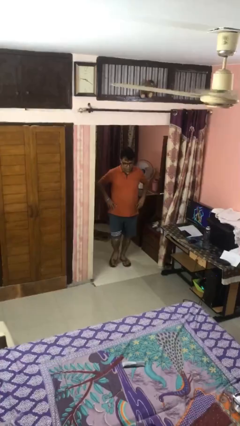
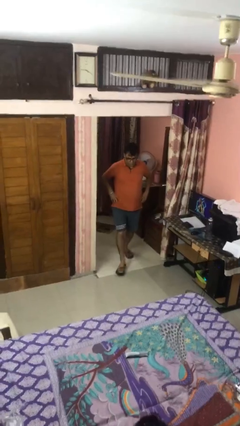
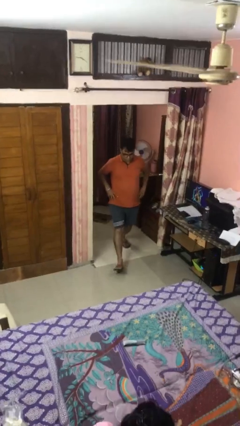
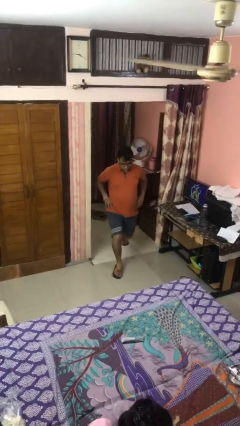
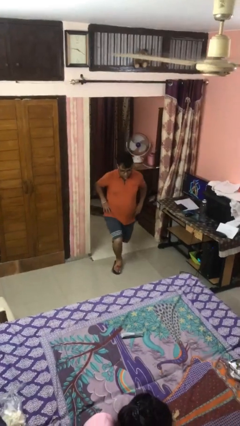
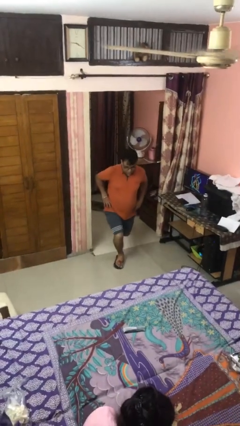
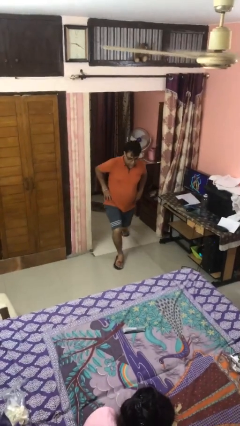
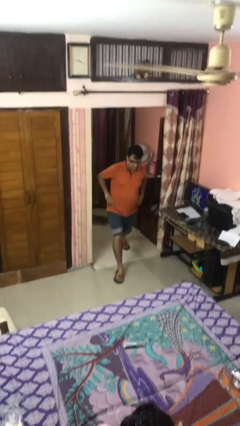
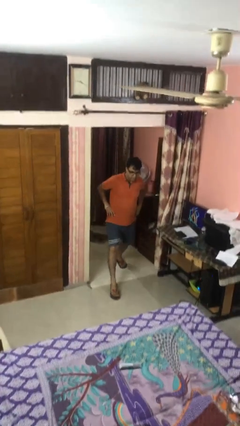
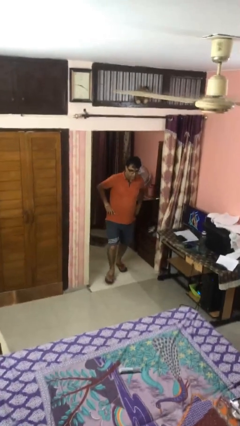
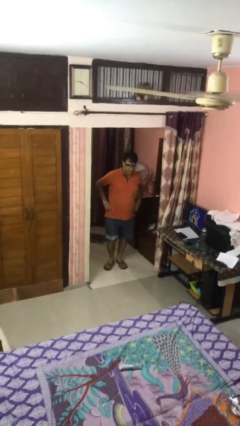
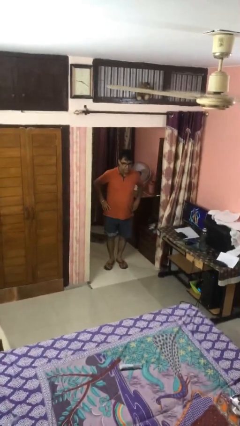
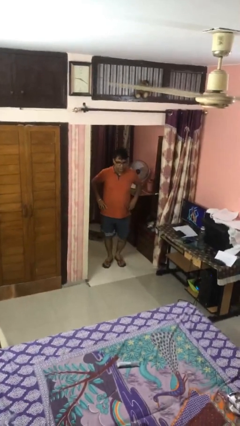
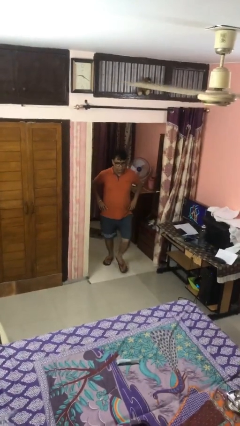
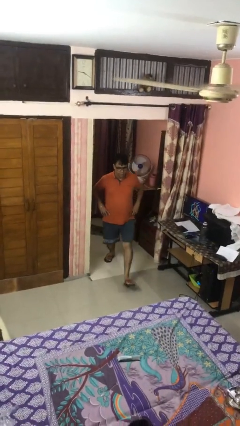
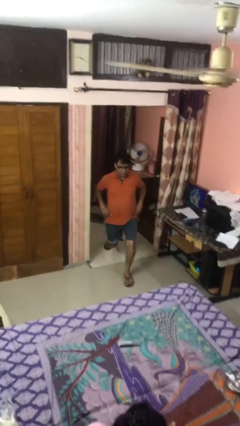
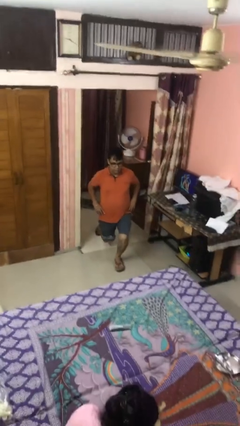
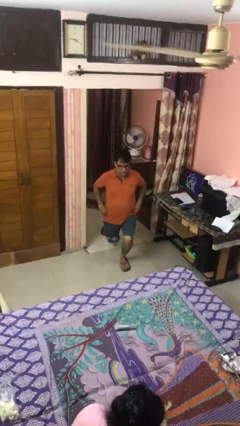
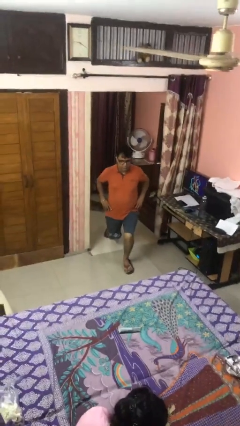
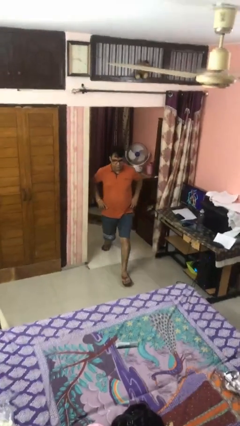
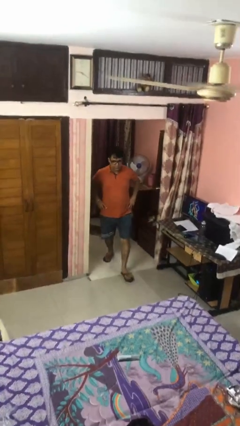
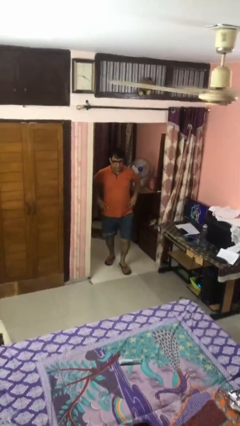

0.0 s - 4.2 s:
person exercises with lunges

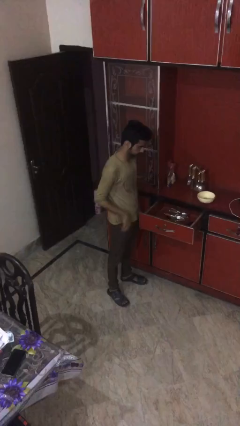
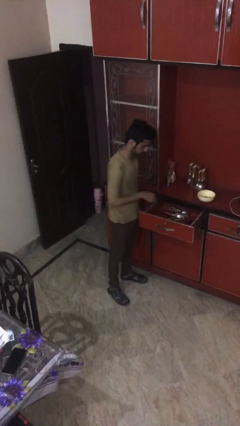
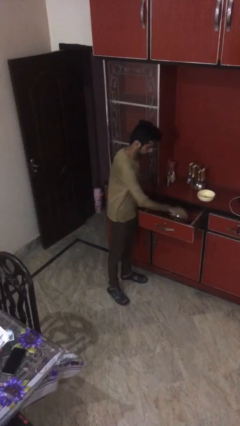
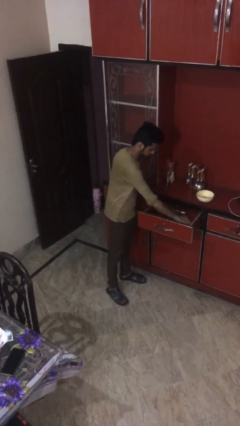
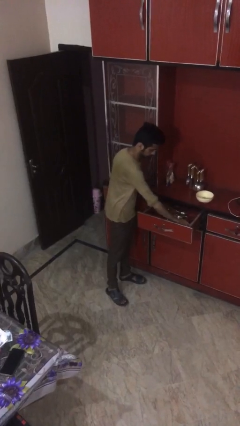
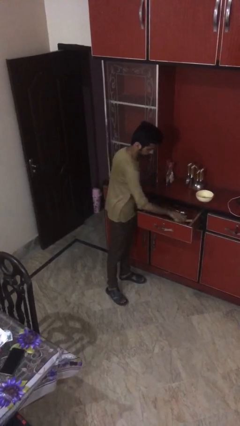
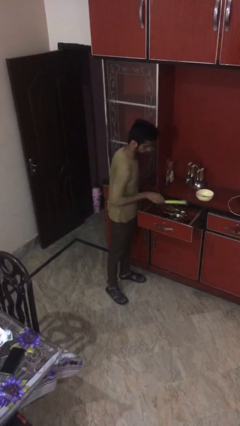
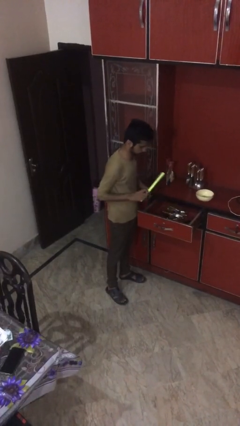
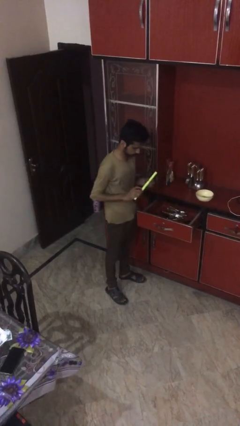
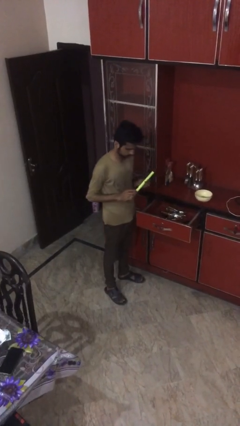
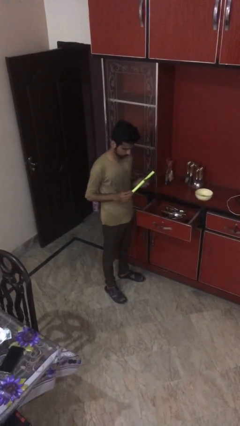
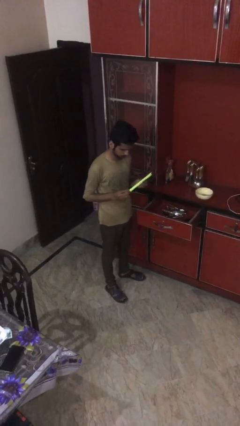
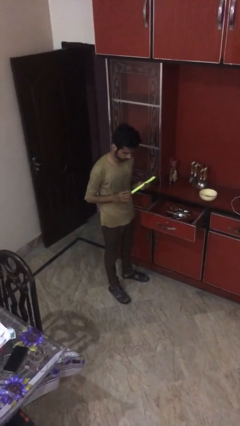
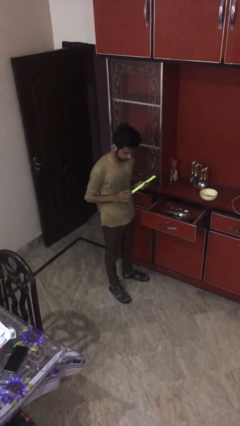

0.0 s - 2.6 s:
person takes object from kitchen drawer

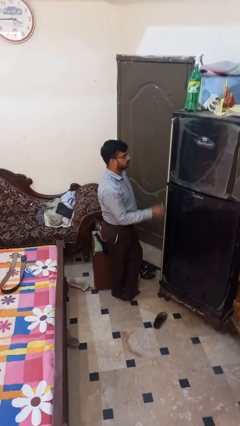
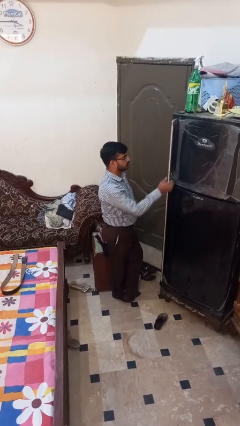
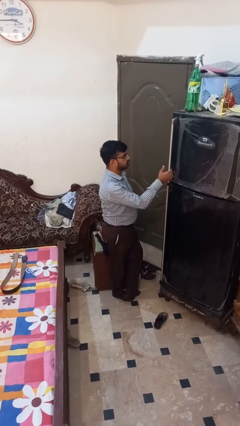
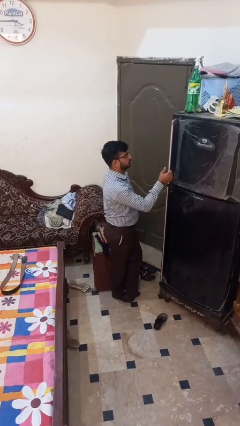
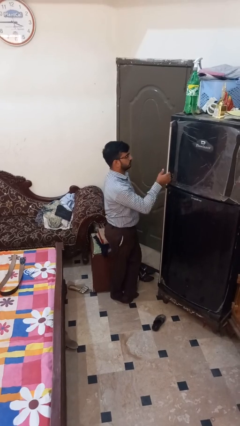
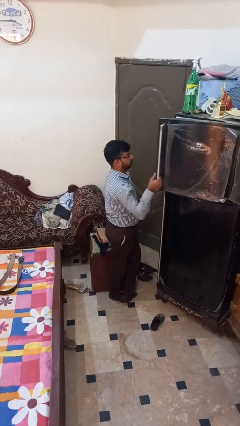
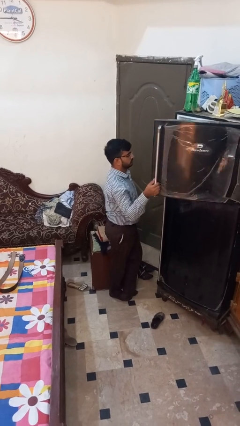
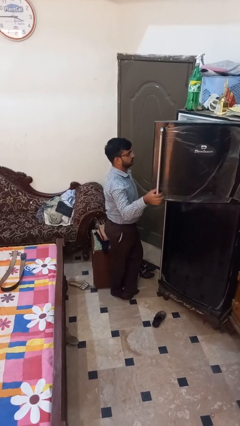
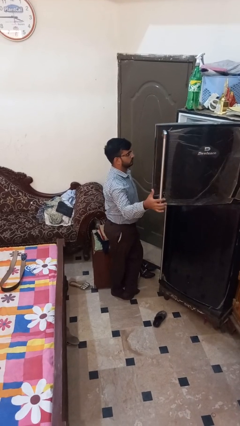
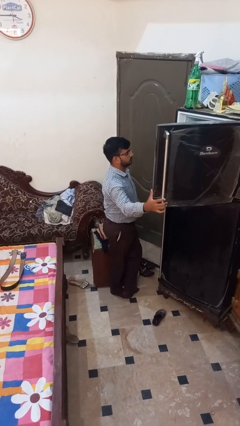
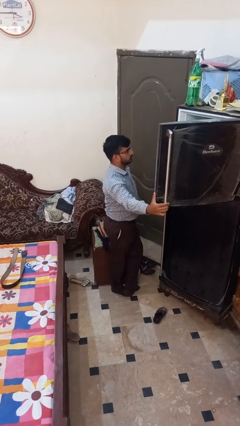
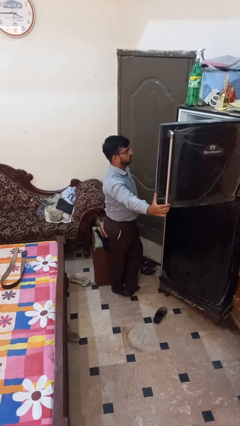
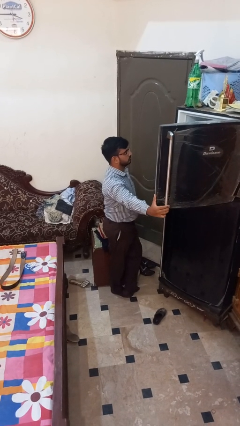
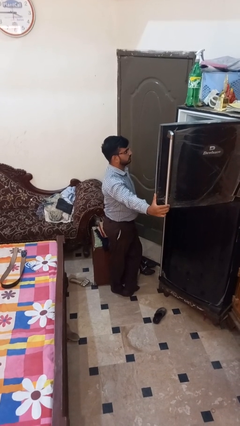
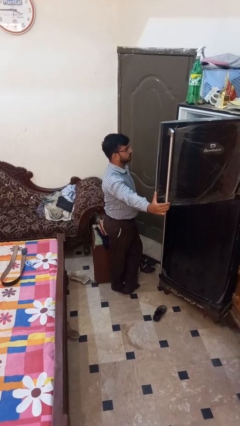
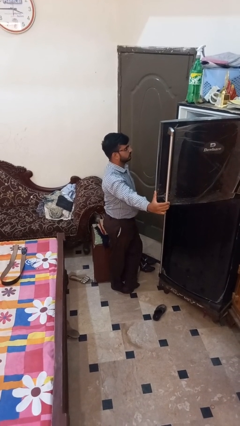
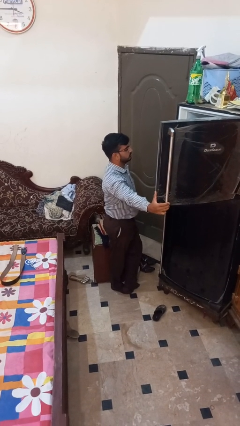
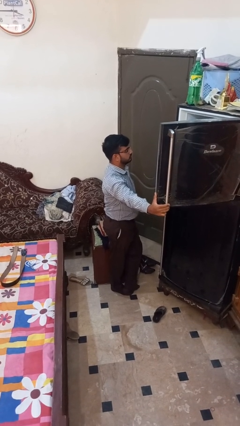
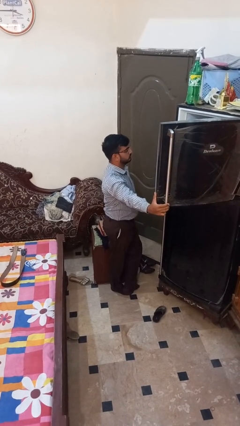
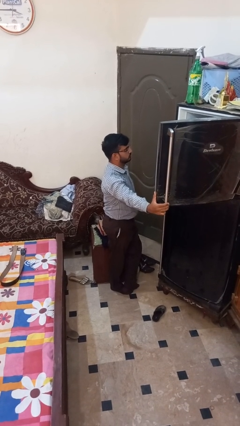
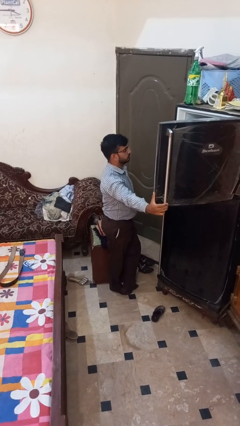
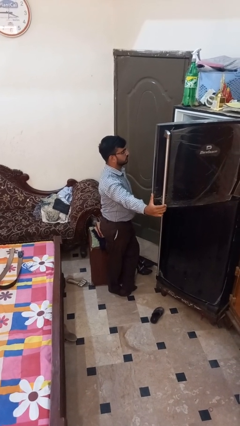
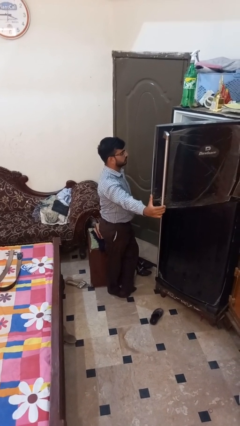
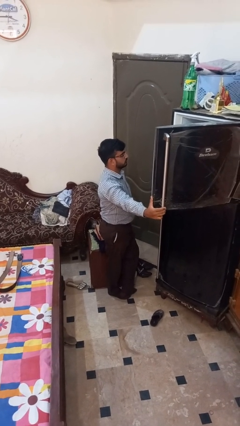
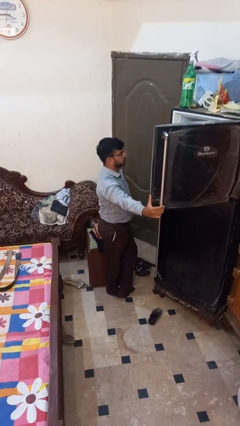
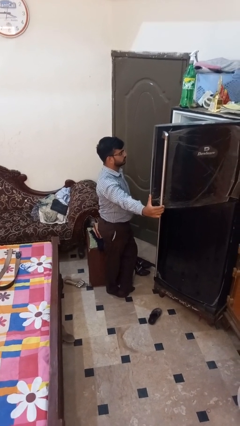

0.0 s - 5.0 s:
person opens refrigerator

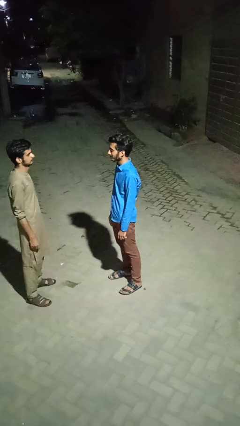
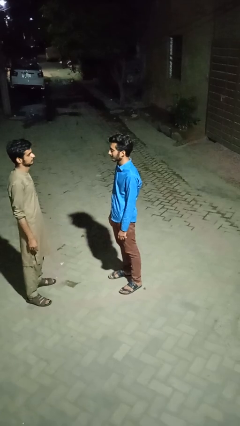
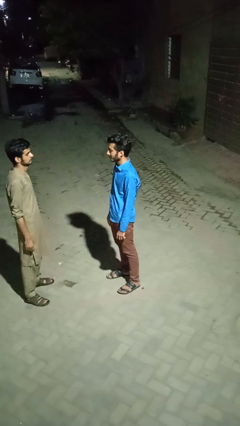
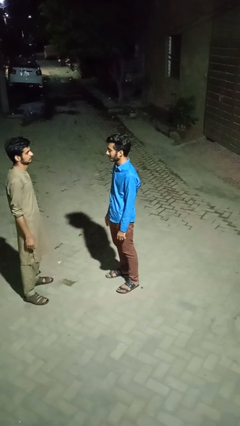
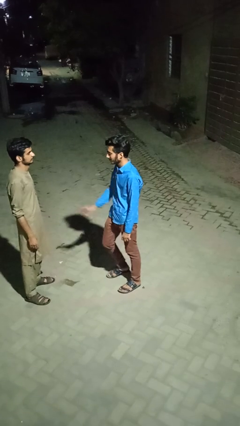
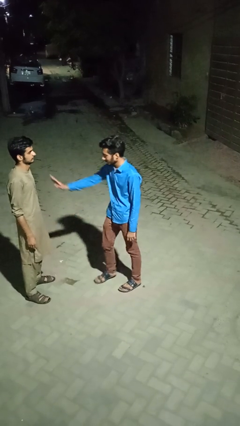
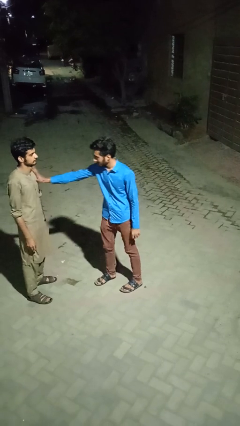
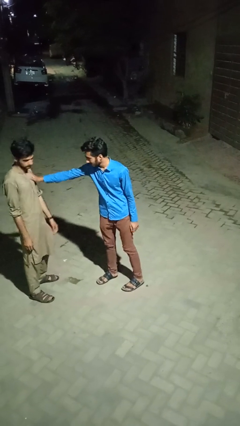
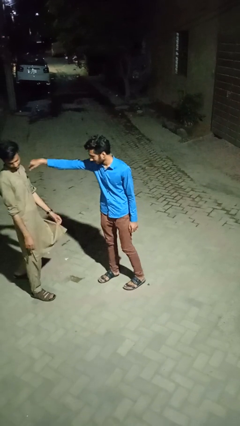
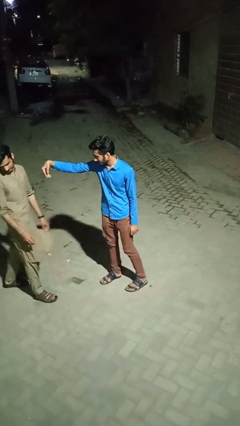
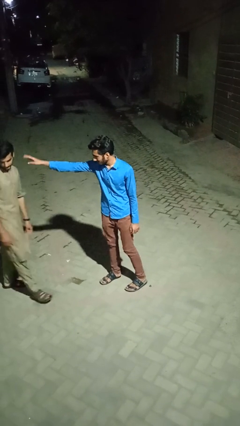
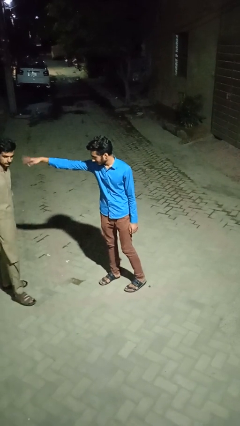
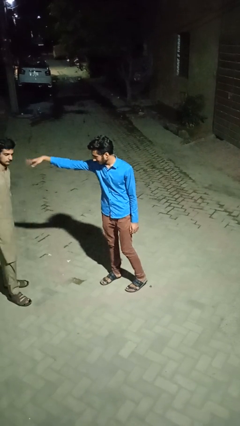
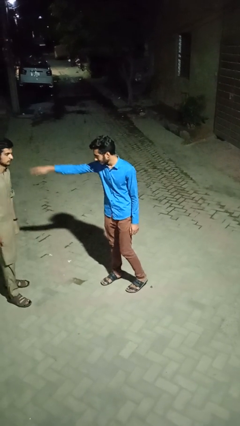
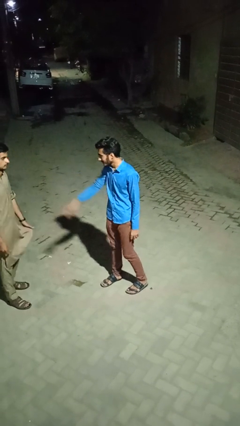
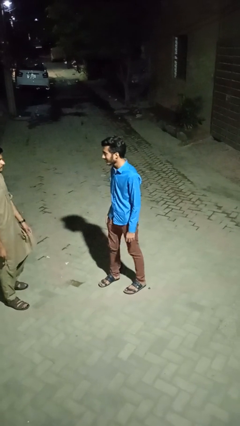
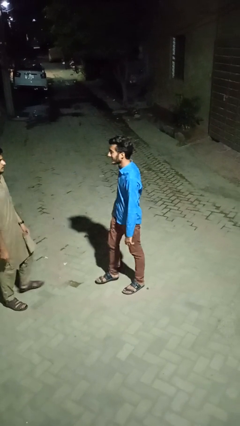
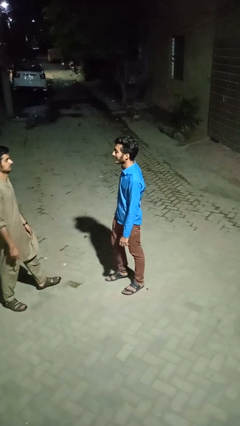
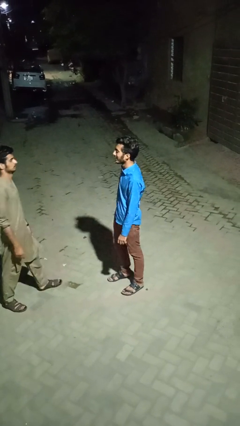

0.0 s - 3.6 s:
person shoves person

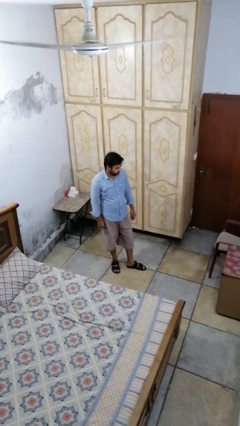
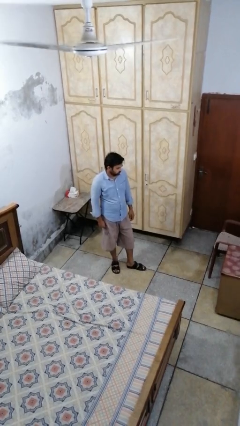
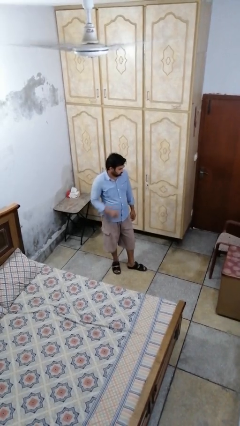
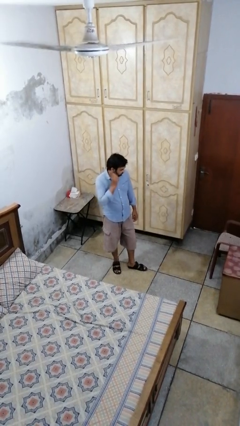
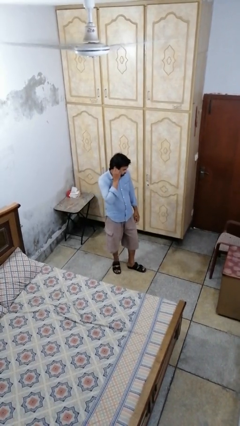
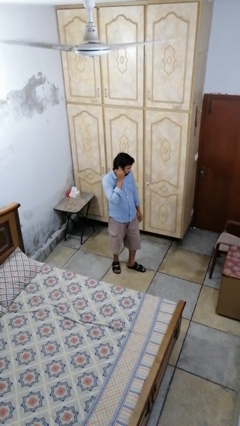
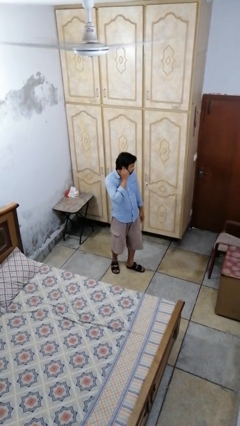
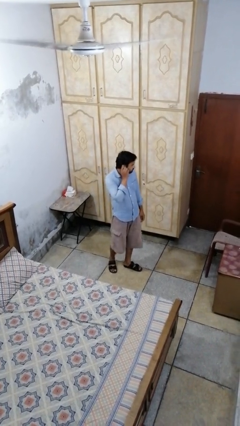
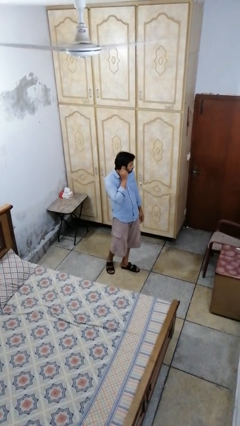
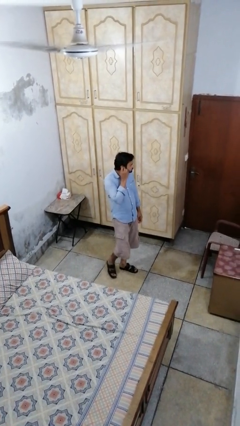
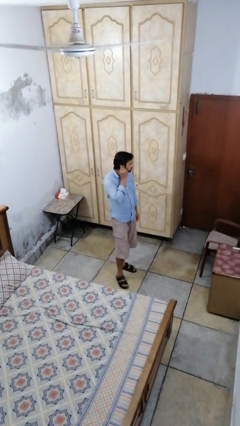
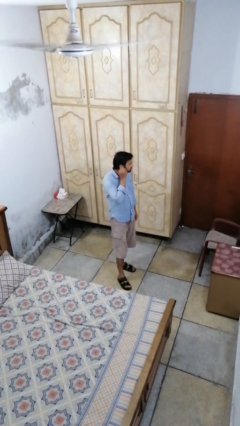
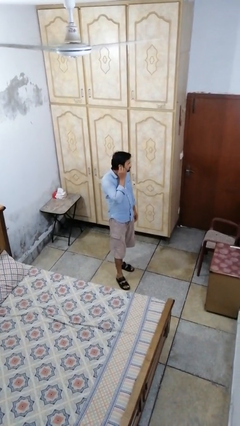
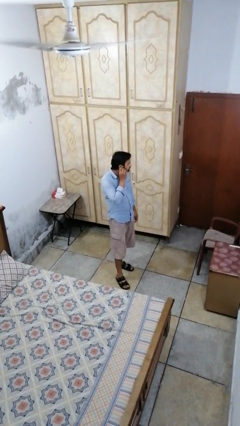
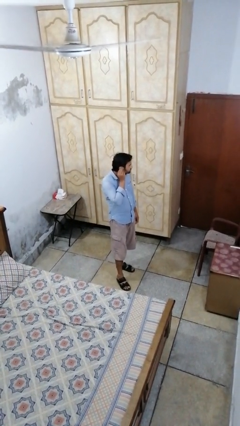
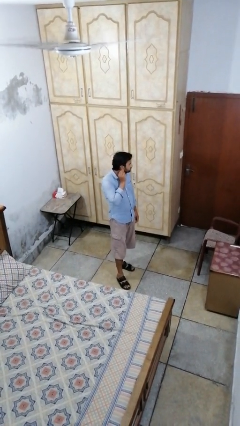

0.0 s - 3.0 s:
person touches earlobe
